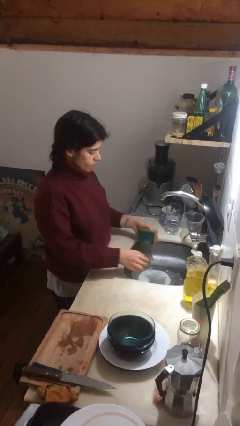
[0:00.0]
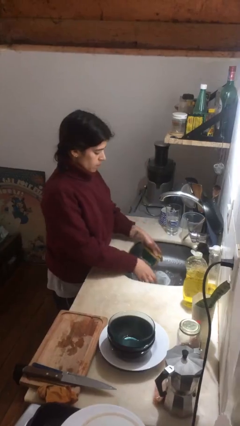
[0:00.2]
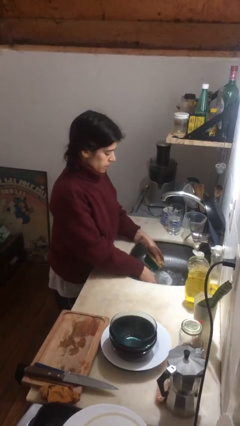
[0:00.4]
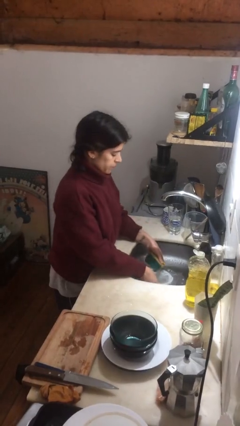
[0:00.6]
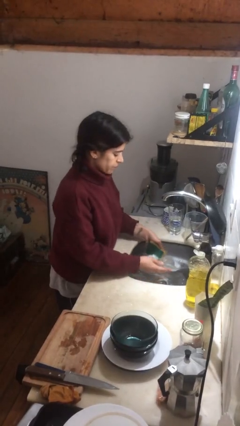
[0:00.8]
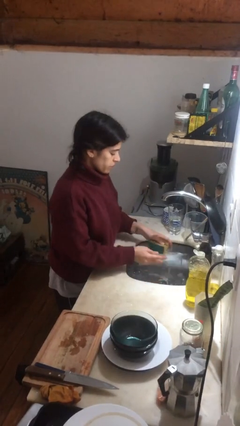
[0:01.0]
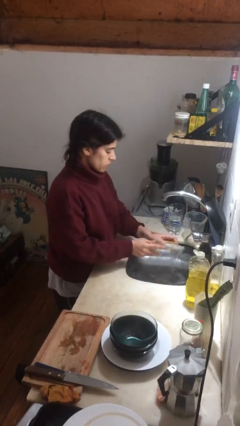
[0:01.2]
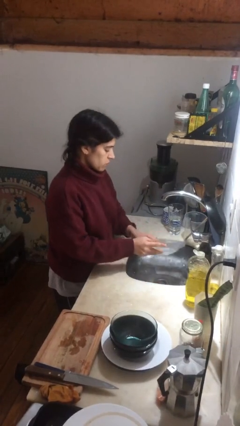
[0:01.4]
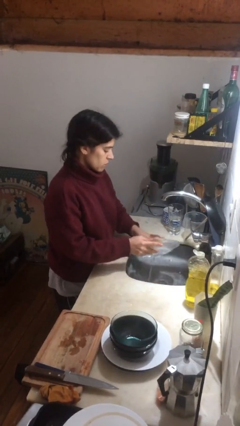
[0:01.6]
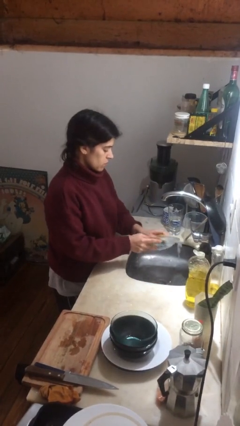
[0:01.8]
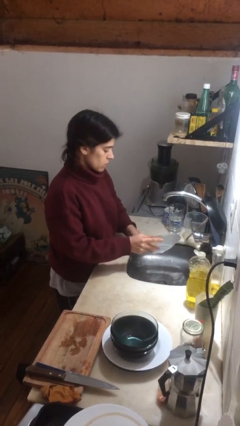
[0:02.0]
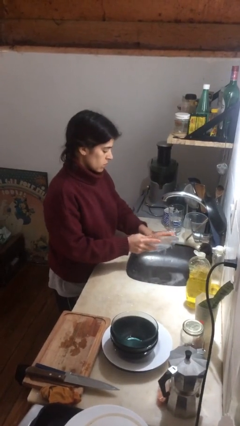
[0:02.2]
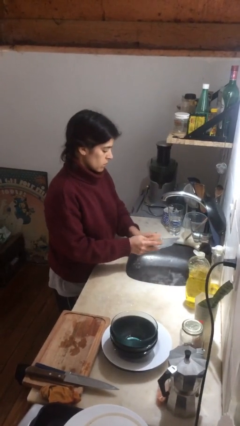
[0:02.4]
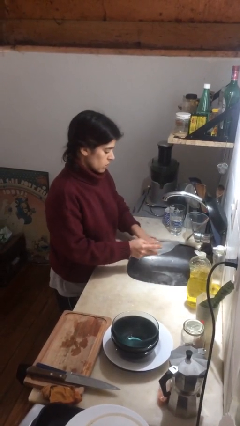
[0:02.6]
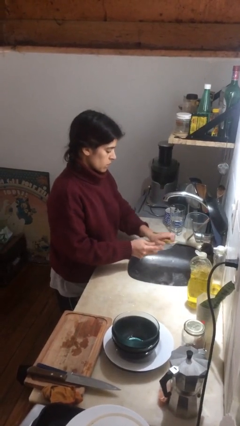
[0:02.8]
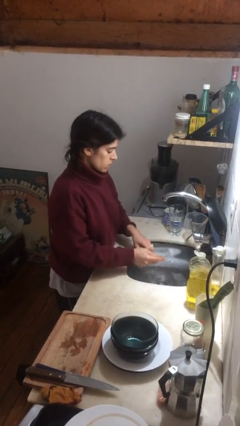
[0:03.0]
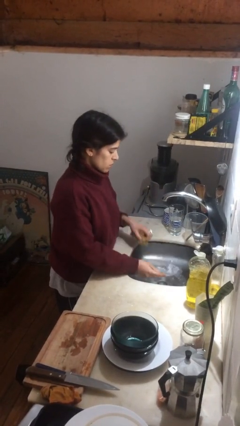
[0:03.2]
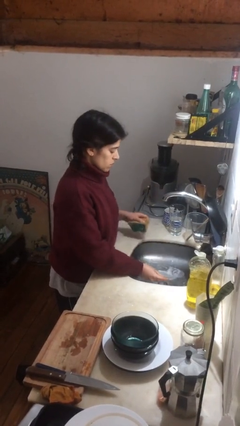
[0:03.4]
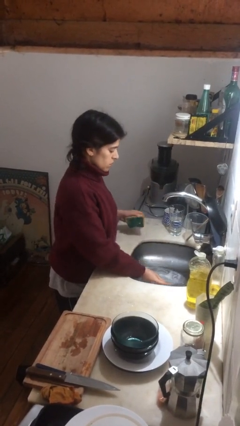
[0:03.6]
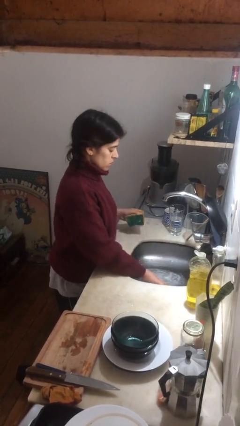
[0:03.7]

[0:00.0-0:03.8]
person washes dish

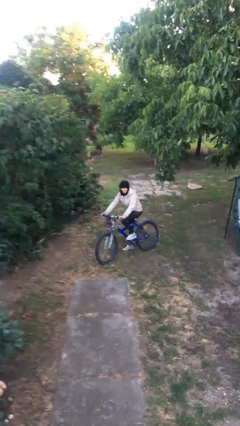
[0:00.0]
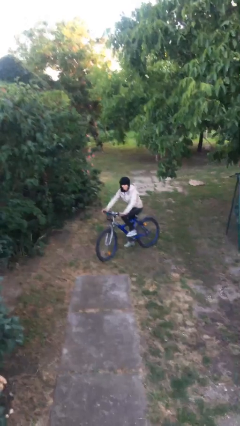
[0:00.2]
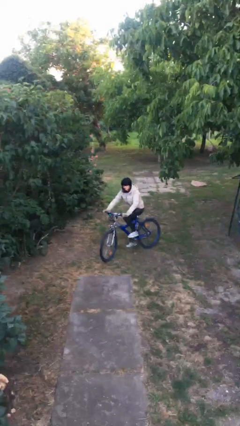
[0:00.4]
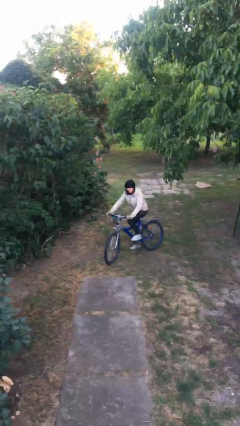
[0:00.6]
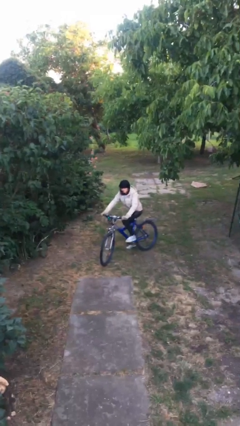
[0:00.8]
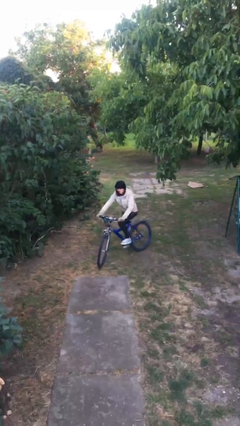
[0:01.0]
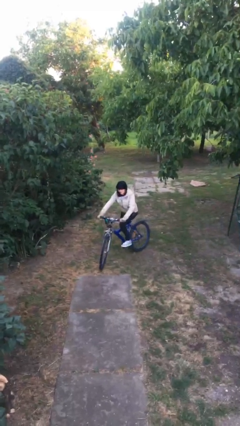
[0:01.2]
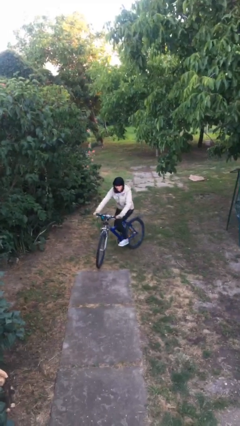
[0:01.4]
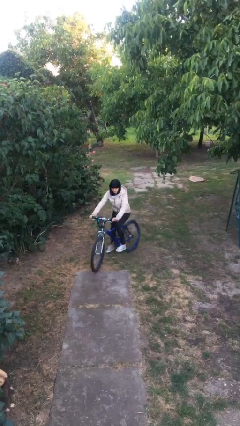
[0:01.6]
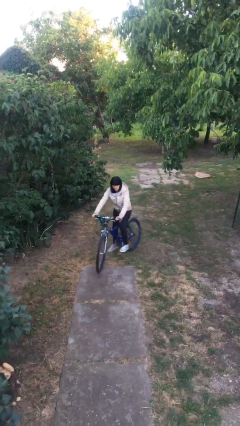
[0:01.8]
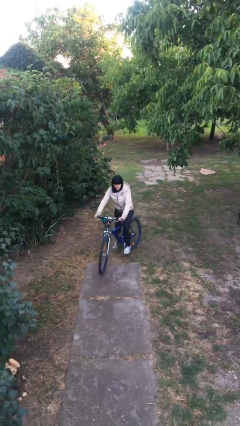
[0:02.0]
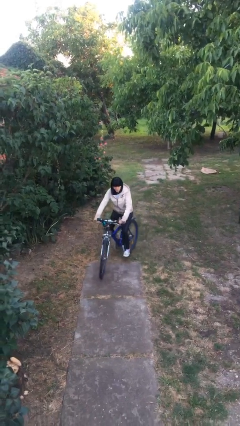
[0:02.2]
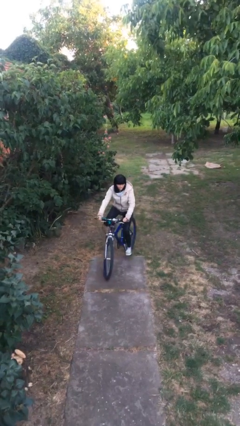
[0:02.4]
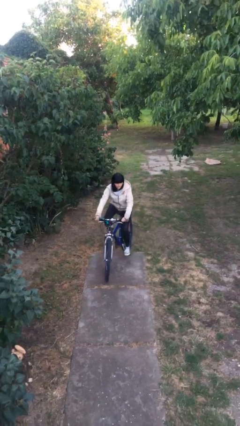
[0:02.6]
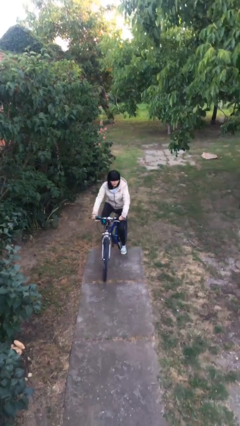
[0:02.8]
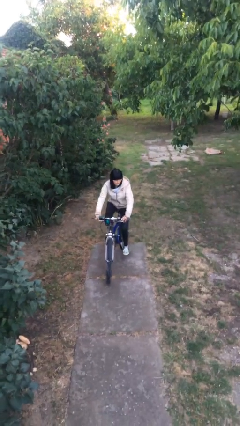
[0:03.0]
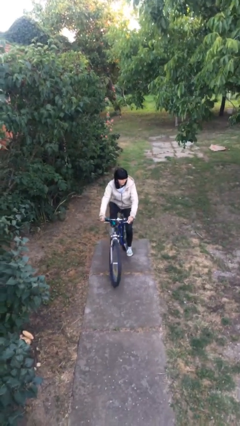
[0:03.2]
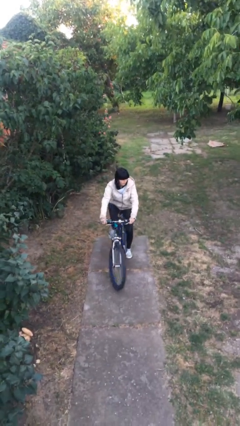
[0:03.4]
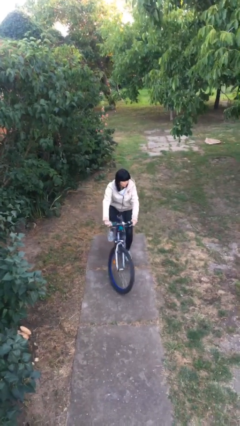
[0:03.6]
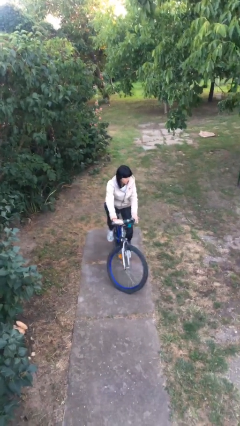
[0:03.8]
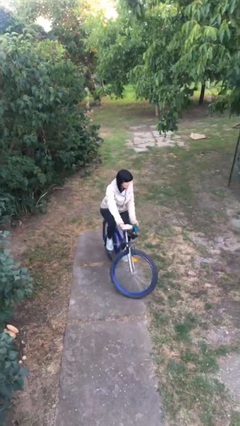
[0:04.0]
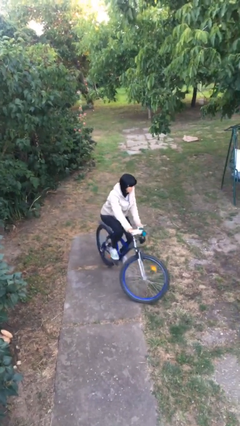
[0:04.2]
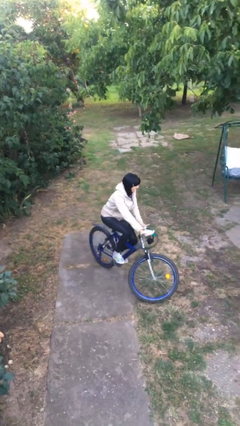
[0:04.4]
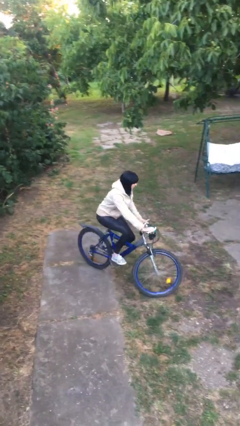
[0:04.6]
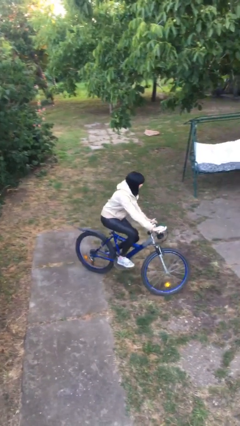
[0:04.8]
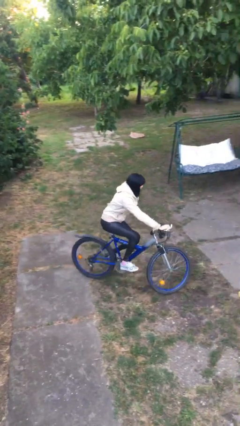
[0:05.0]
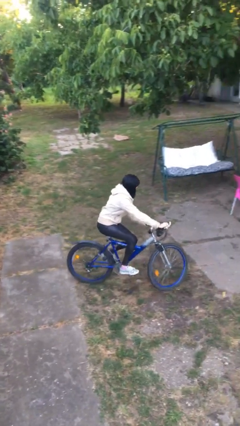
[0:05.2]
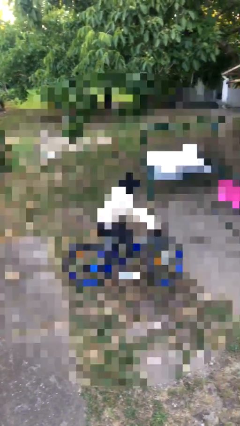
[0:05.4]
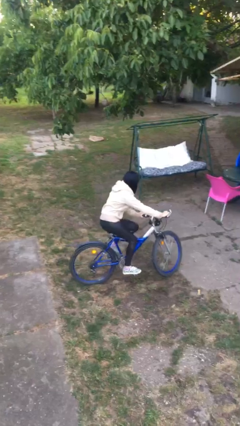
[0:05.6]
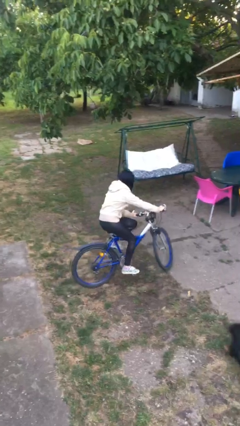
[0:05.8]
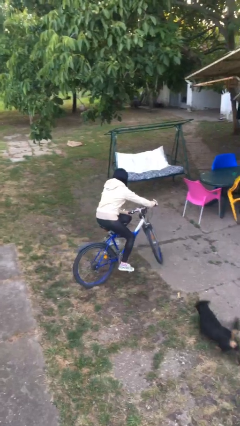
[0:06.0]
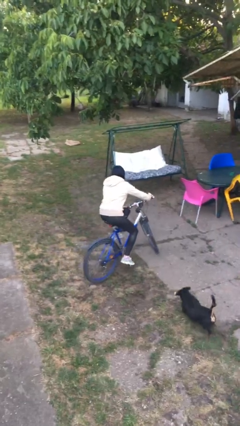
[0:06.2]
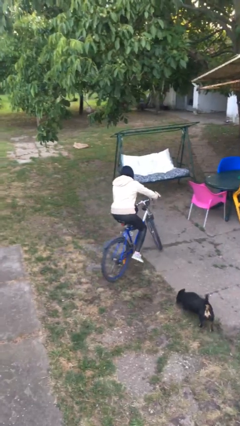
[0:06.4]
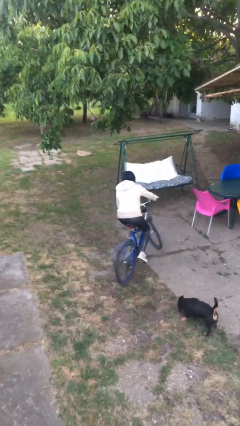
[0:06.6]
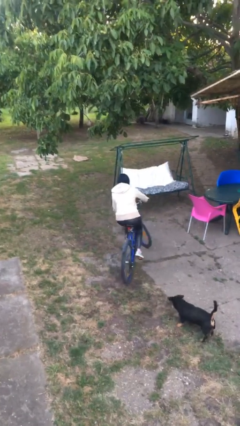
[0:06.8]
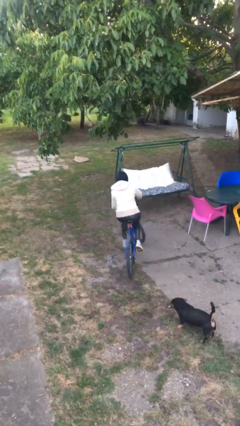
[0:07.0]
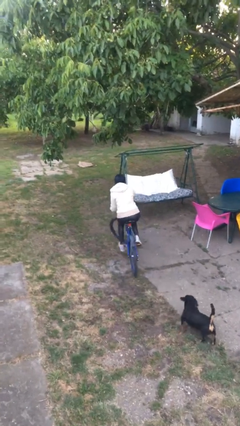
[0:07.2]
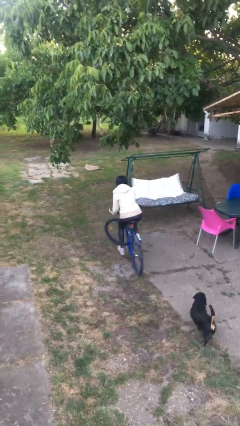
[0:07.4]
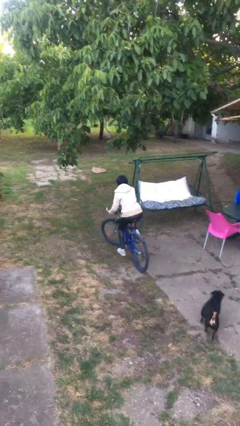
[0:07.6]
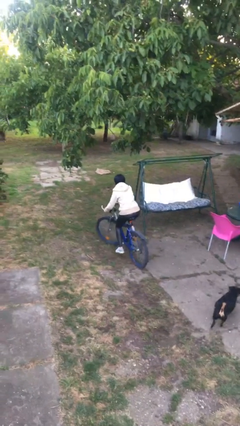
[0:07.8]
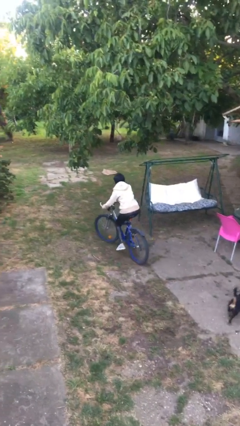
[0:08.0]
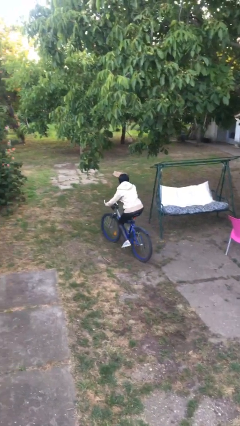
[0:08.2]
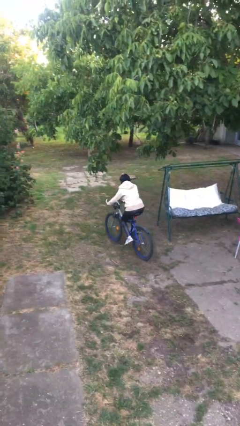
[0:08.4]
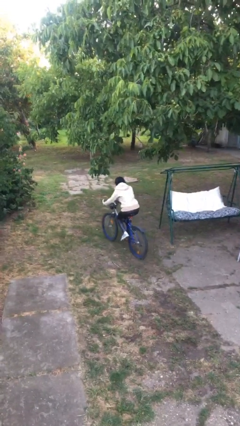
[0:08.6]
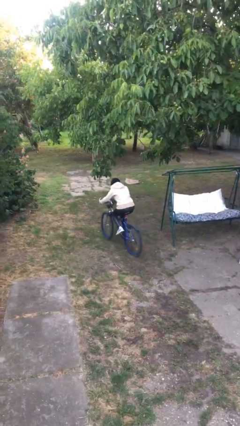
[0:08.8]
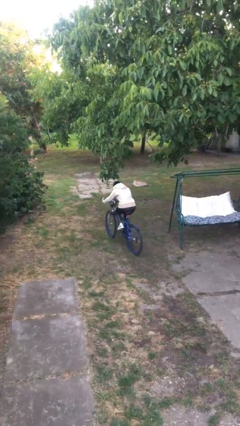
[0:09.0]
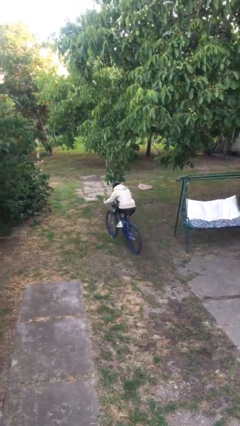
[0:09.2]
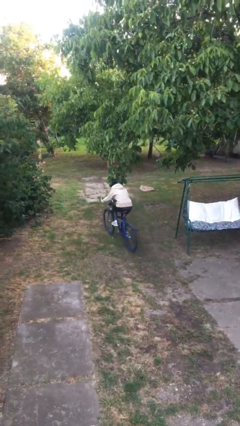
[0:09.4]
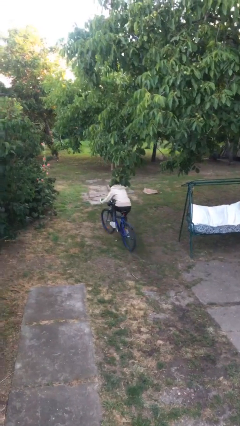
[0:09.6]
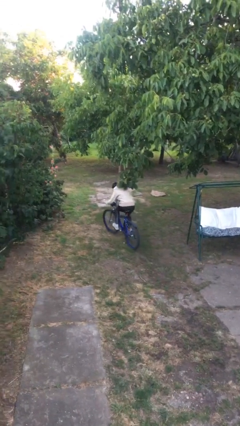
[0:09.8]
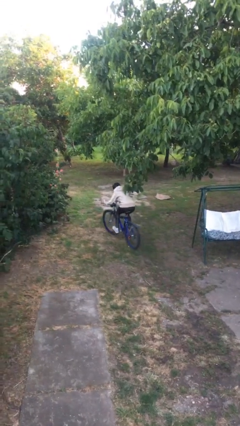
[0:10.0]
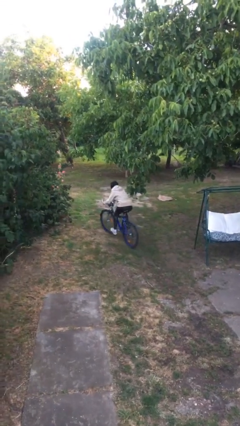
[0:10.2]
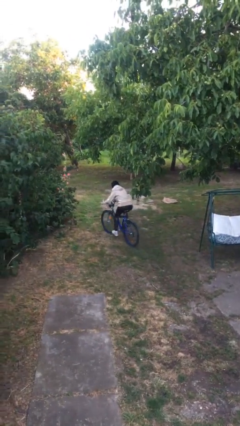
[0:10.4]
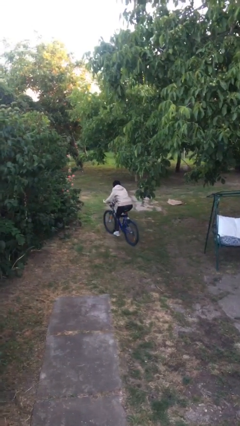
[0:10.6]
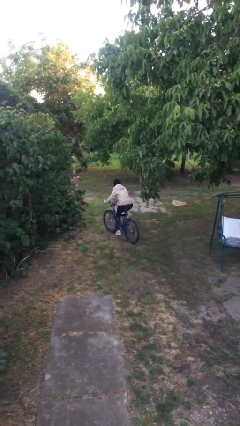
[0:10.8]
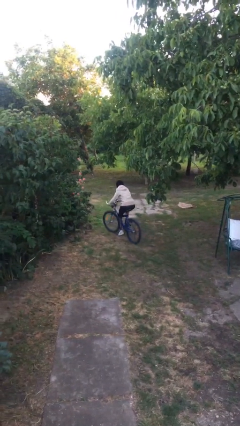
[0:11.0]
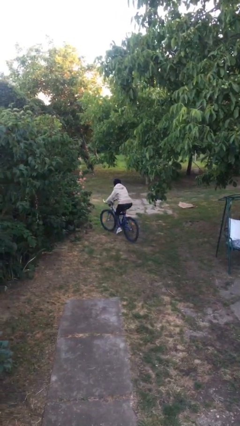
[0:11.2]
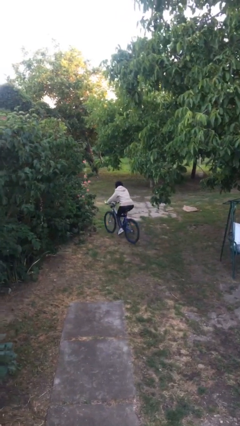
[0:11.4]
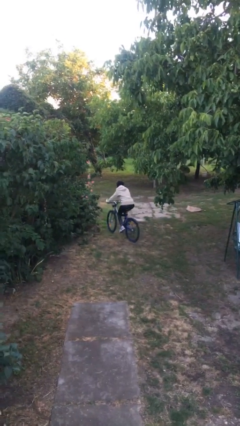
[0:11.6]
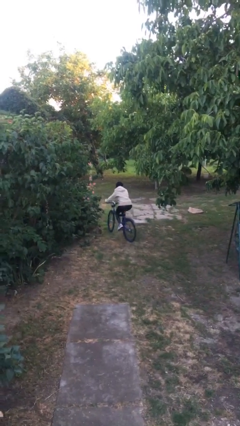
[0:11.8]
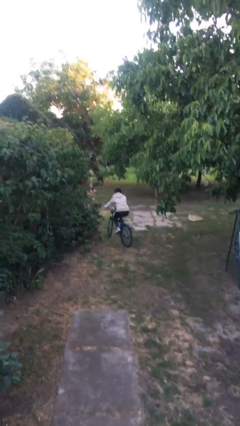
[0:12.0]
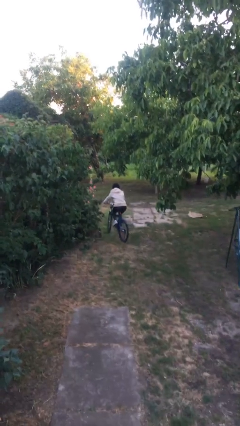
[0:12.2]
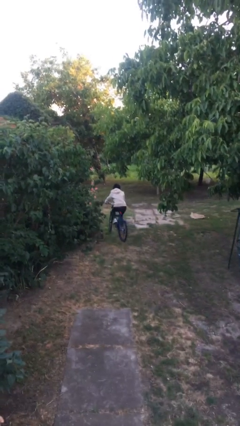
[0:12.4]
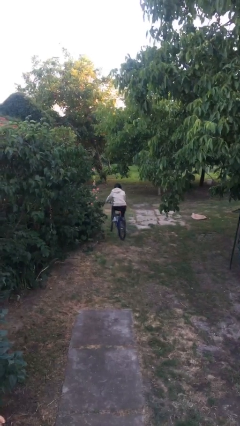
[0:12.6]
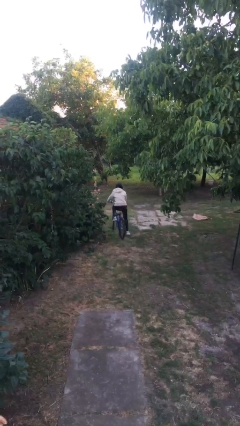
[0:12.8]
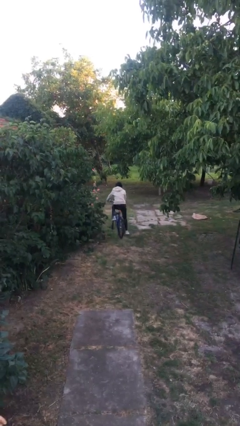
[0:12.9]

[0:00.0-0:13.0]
person rides bicycle

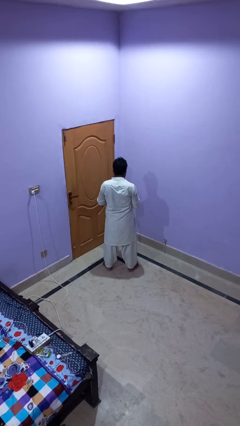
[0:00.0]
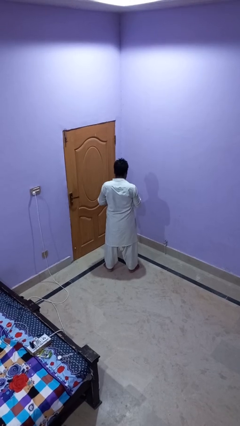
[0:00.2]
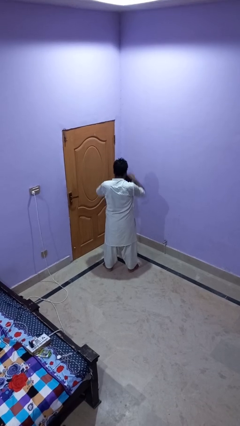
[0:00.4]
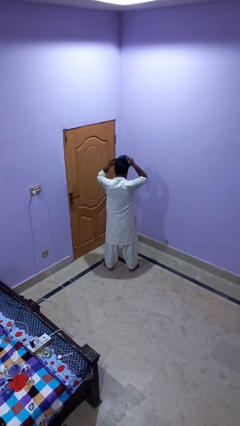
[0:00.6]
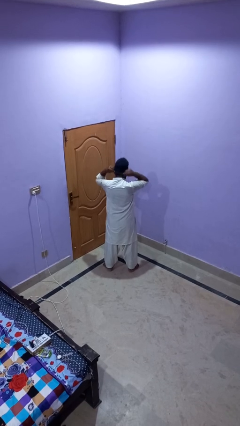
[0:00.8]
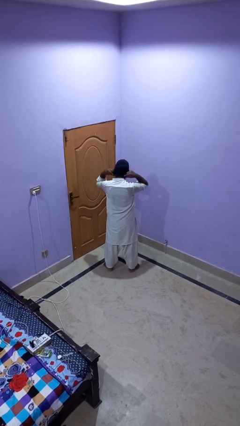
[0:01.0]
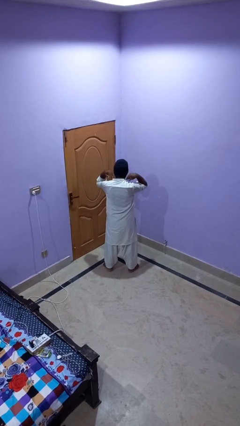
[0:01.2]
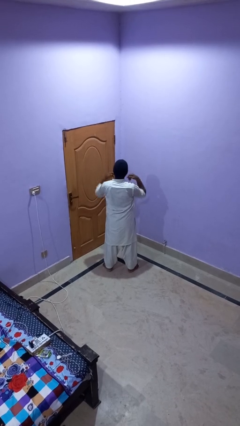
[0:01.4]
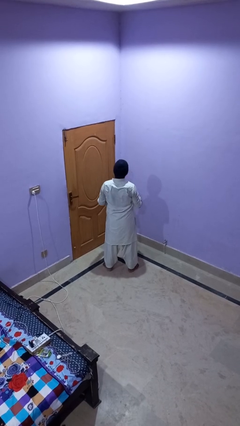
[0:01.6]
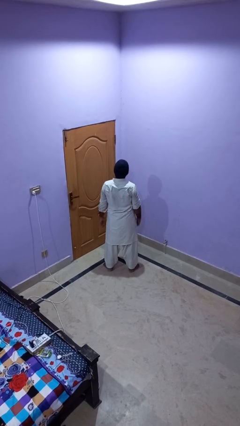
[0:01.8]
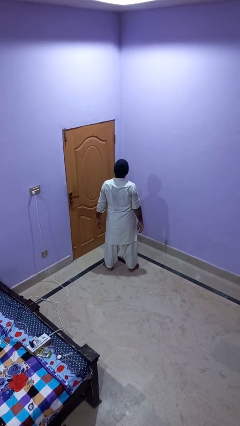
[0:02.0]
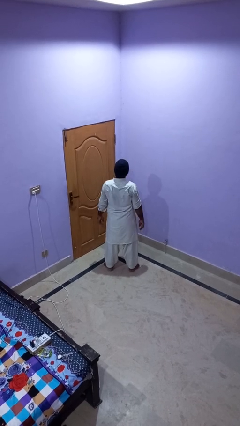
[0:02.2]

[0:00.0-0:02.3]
person puts on hat
